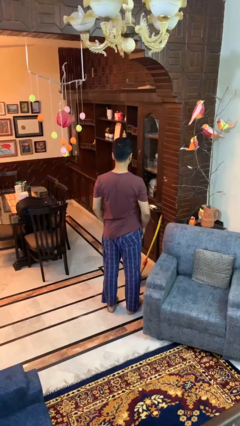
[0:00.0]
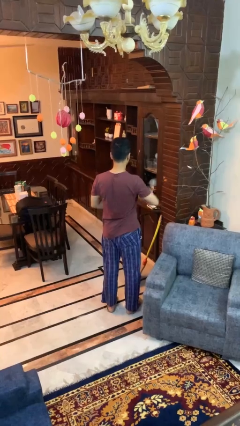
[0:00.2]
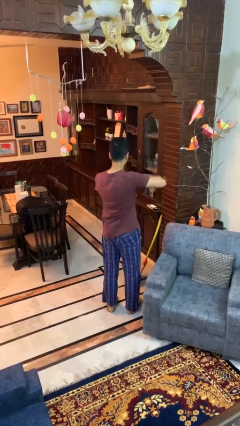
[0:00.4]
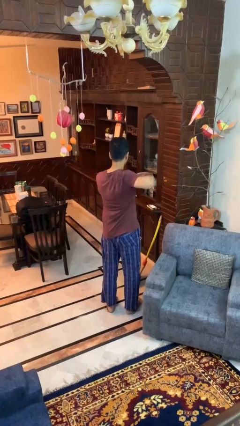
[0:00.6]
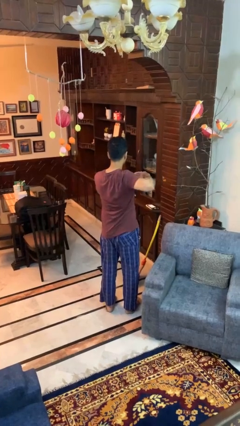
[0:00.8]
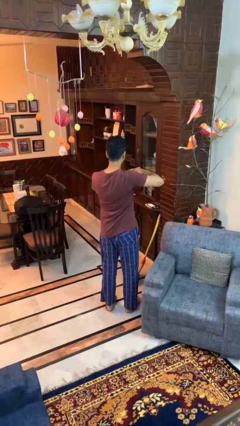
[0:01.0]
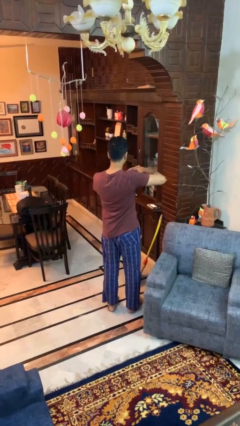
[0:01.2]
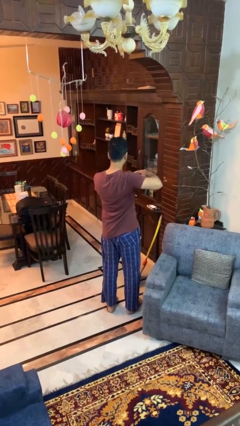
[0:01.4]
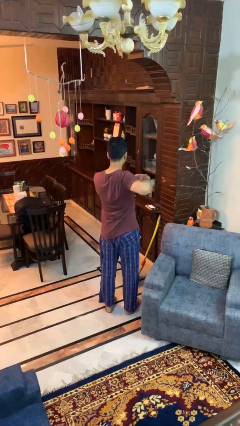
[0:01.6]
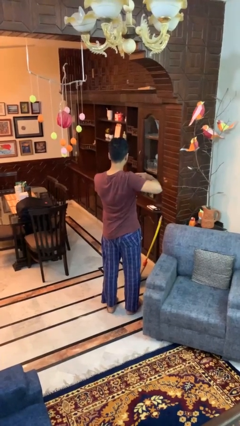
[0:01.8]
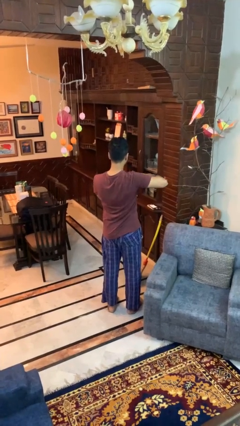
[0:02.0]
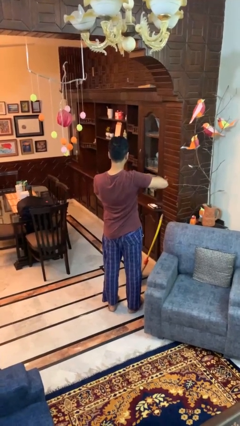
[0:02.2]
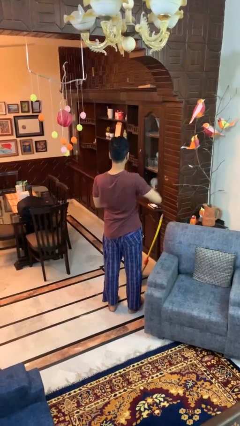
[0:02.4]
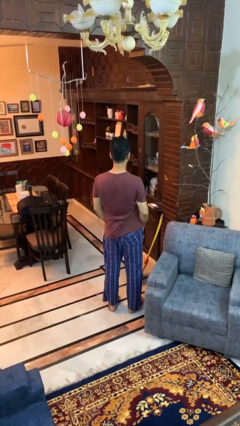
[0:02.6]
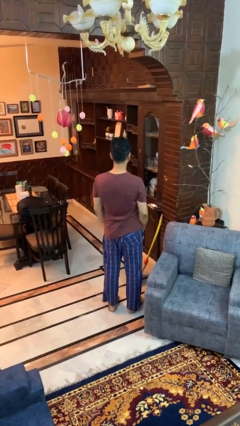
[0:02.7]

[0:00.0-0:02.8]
person stretches arms to side

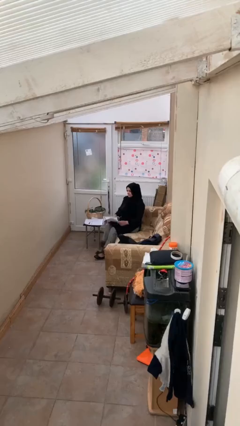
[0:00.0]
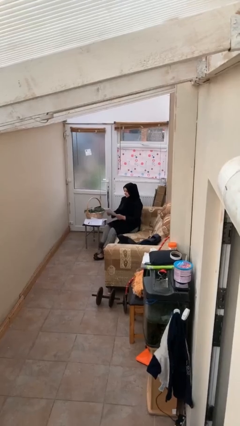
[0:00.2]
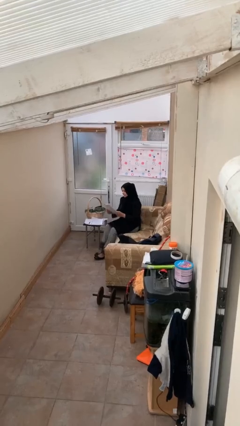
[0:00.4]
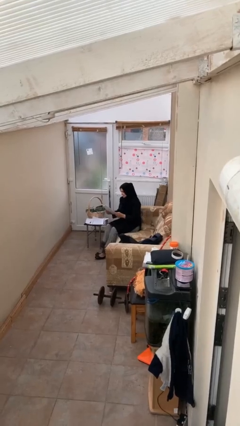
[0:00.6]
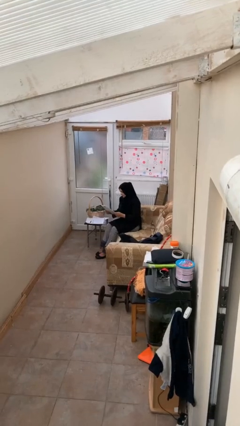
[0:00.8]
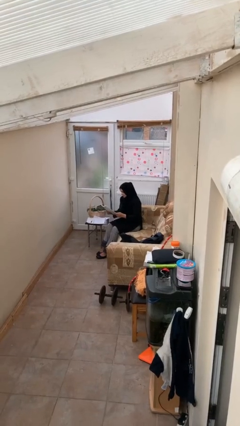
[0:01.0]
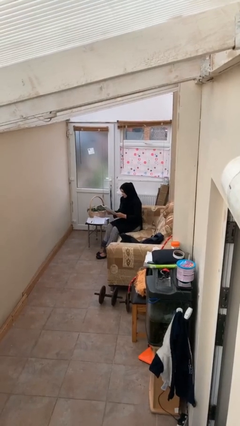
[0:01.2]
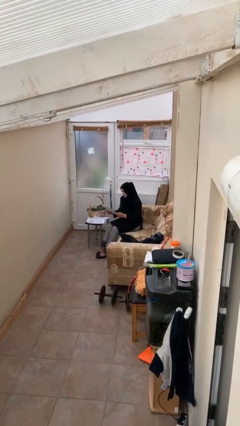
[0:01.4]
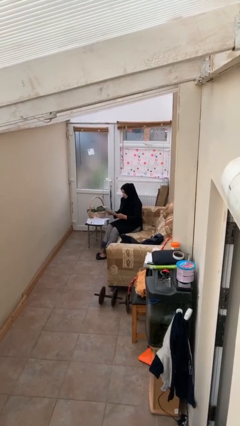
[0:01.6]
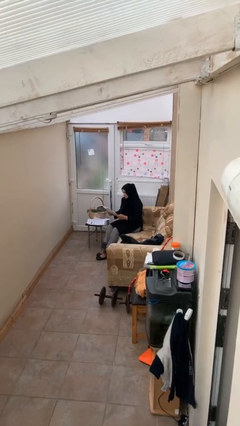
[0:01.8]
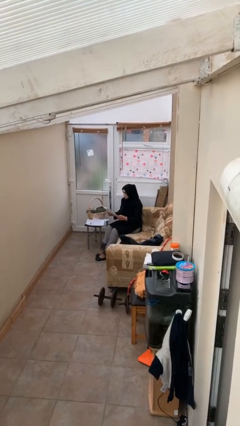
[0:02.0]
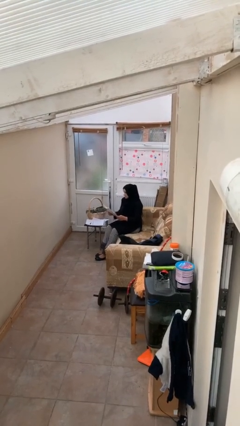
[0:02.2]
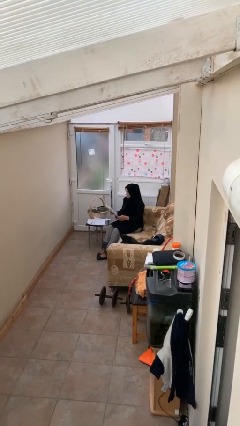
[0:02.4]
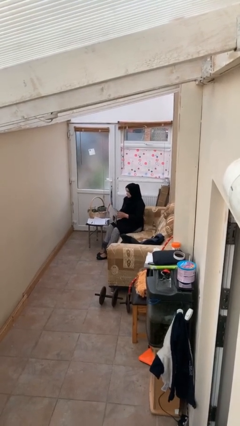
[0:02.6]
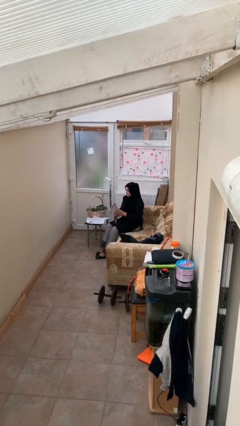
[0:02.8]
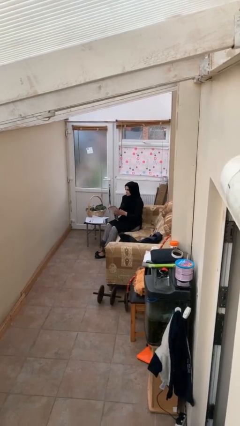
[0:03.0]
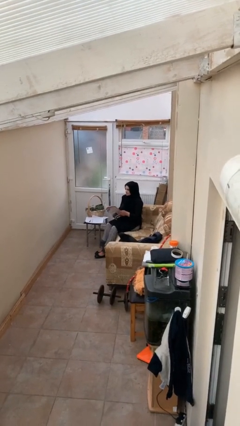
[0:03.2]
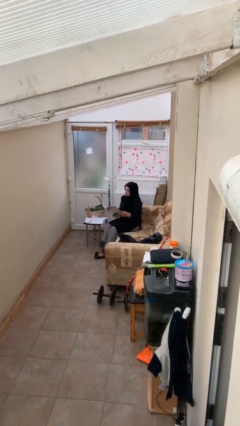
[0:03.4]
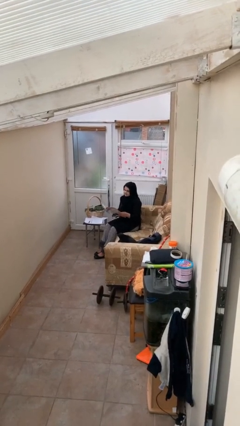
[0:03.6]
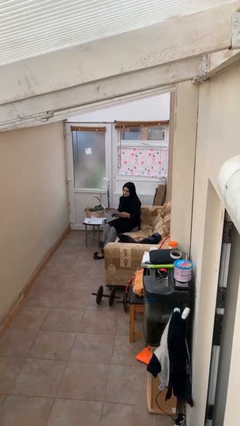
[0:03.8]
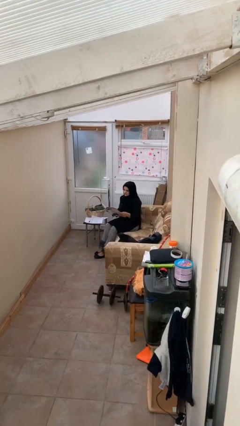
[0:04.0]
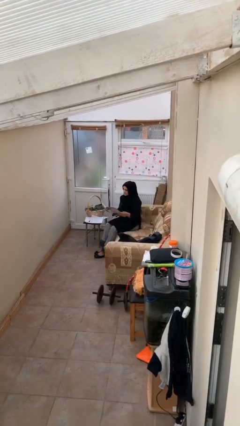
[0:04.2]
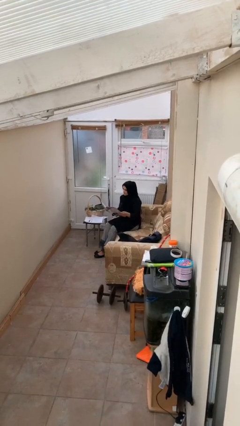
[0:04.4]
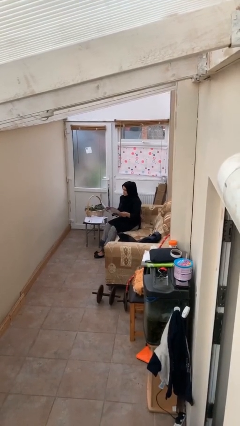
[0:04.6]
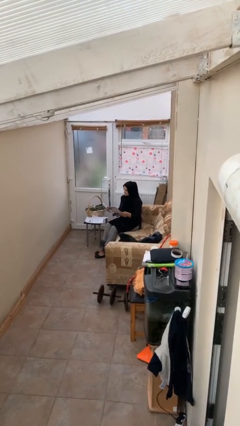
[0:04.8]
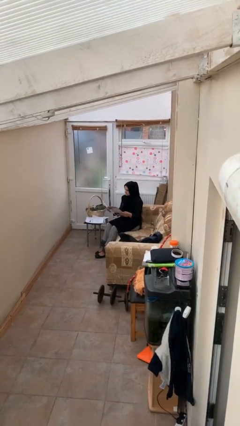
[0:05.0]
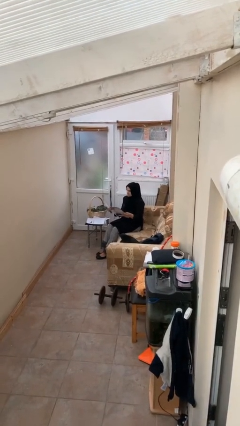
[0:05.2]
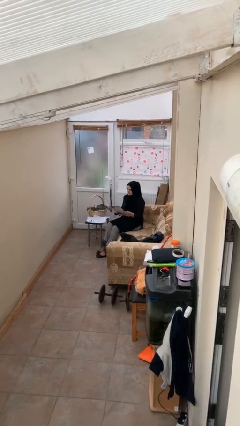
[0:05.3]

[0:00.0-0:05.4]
person reads document

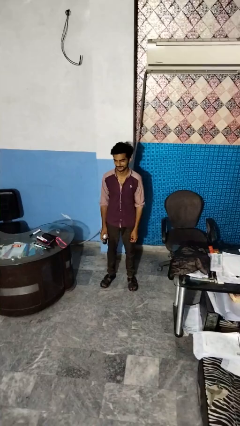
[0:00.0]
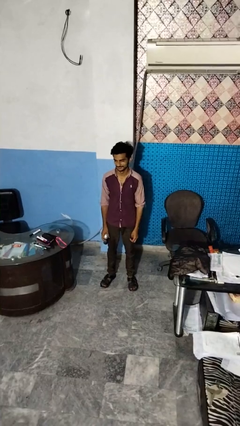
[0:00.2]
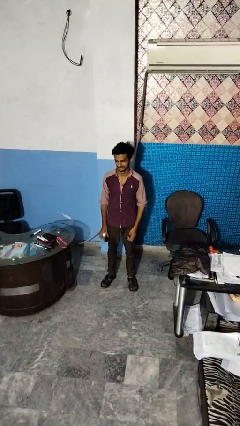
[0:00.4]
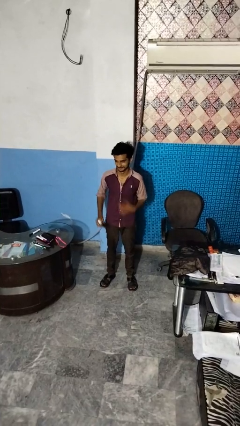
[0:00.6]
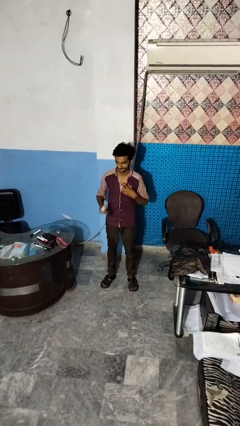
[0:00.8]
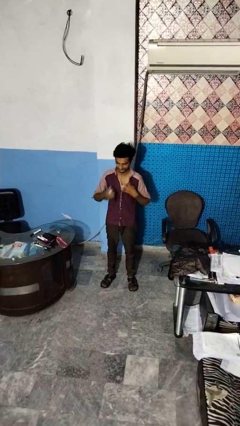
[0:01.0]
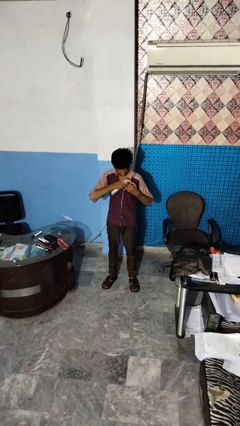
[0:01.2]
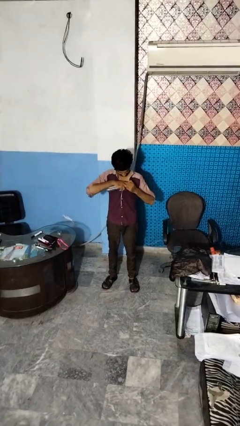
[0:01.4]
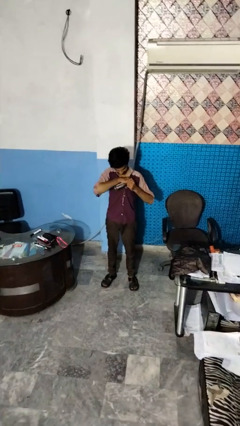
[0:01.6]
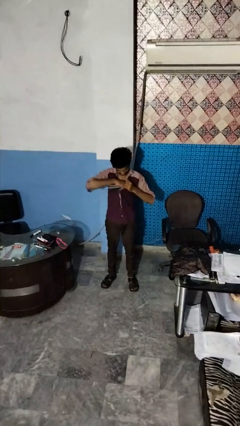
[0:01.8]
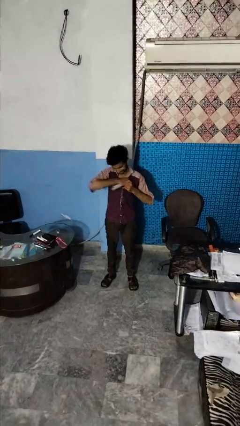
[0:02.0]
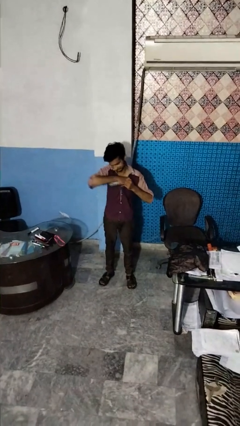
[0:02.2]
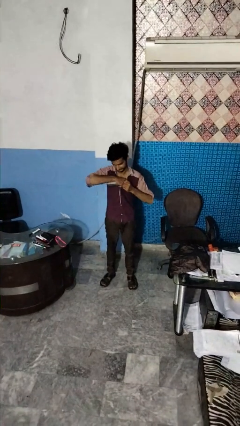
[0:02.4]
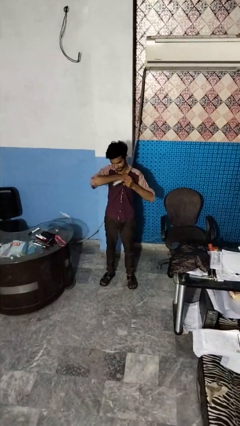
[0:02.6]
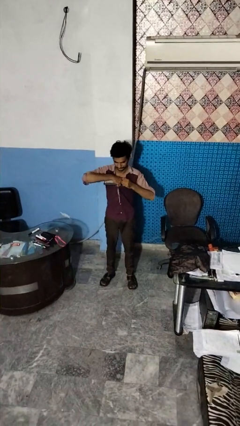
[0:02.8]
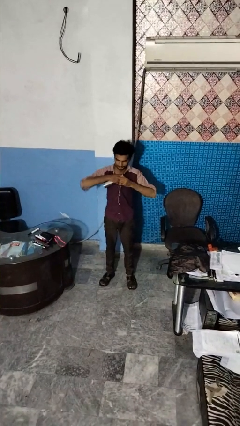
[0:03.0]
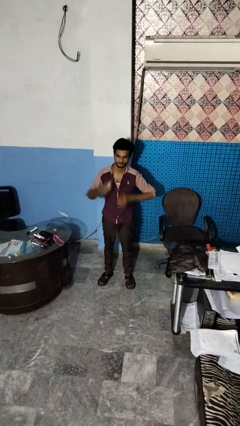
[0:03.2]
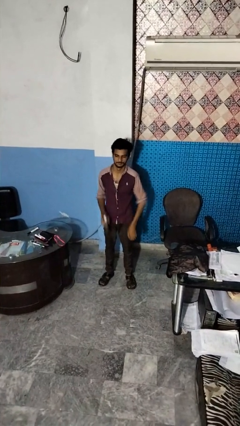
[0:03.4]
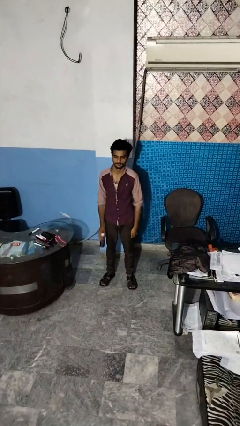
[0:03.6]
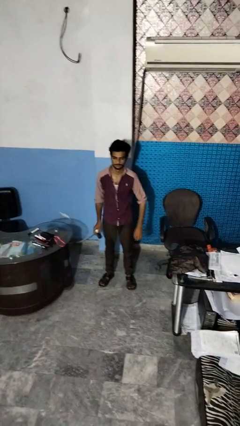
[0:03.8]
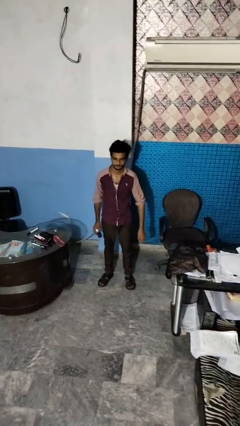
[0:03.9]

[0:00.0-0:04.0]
person applies deodorant

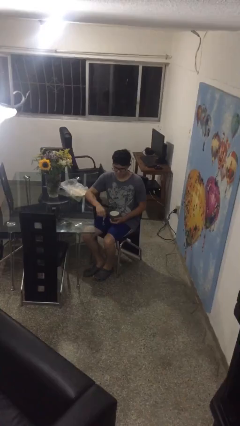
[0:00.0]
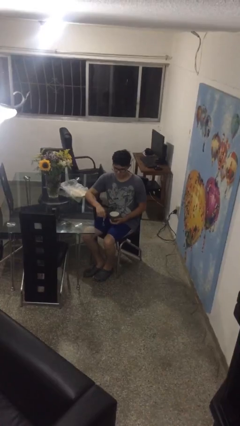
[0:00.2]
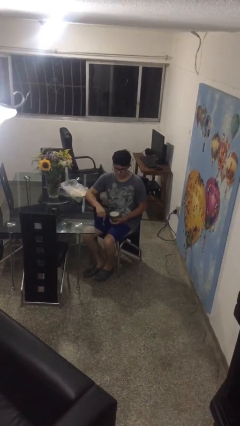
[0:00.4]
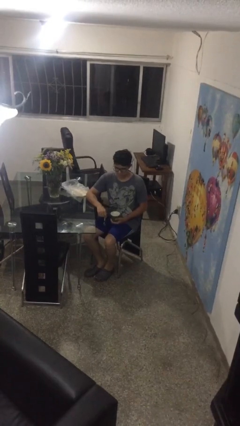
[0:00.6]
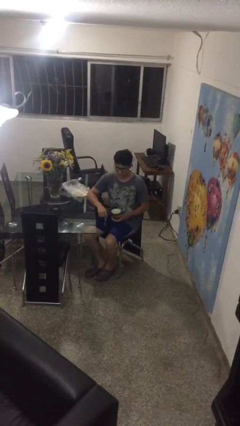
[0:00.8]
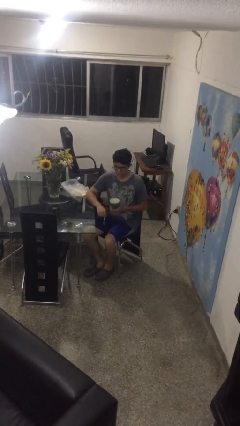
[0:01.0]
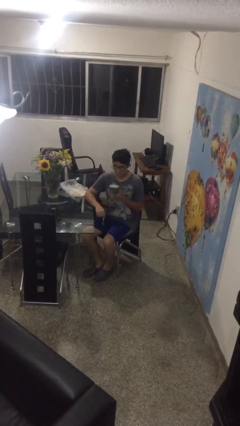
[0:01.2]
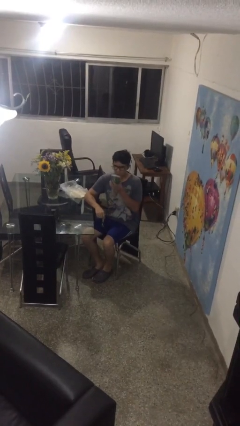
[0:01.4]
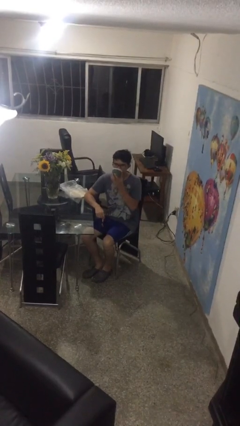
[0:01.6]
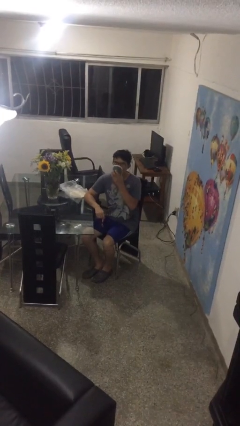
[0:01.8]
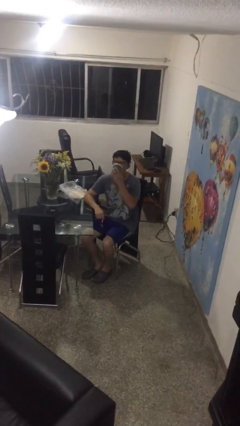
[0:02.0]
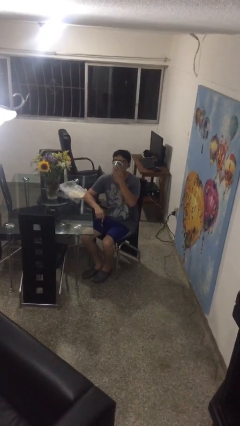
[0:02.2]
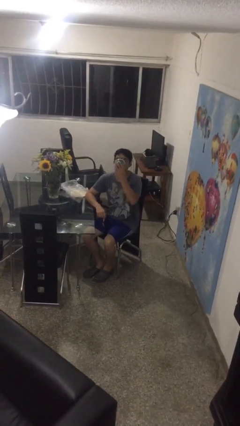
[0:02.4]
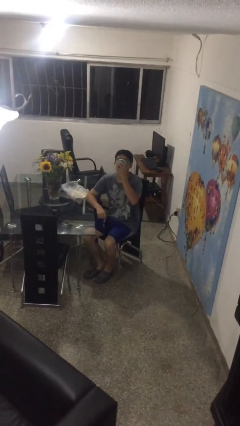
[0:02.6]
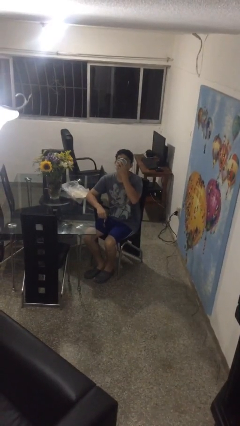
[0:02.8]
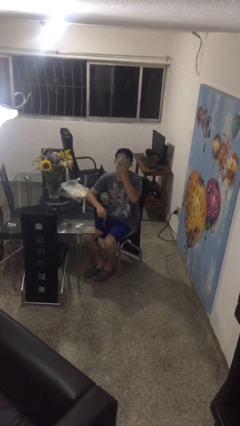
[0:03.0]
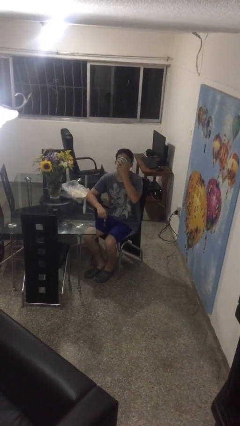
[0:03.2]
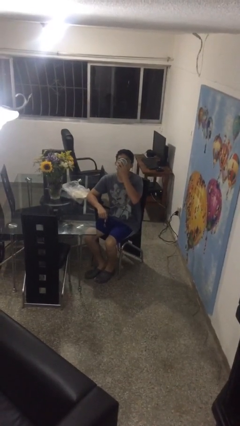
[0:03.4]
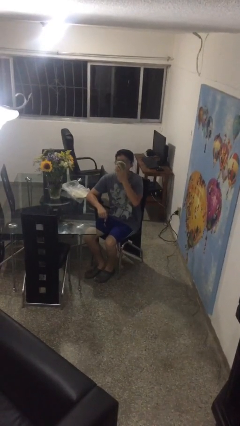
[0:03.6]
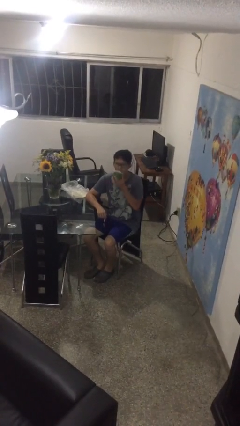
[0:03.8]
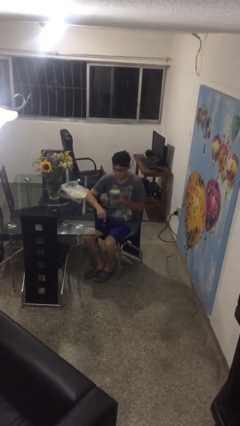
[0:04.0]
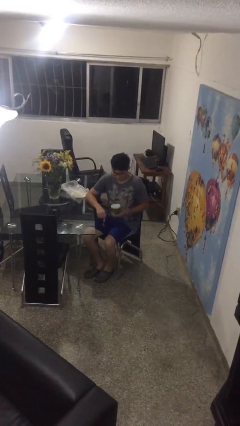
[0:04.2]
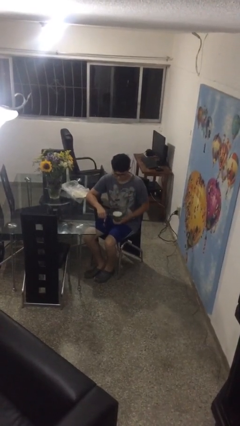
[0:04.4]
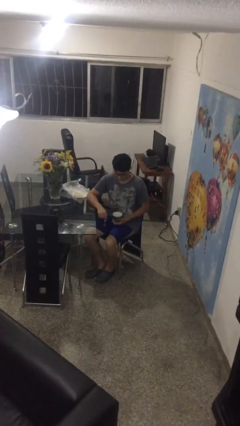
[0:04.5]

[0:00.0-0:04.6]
person drinks from mug

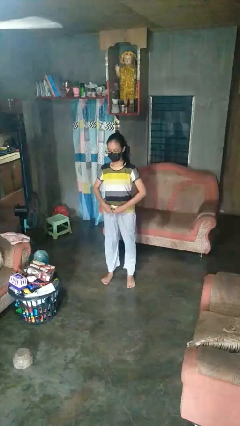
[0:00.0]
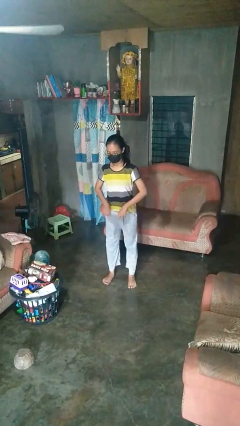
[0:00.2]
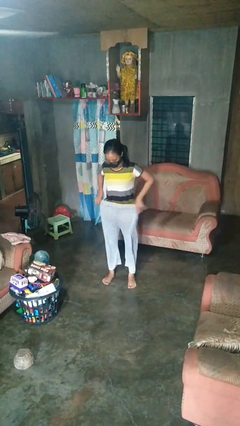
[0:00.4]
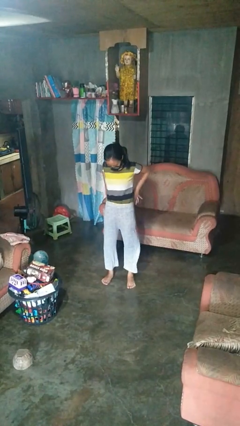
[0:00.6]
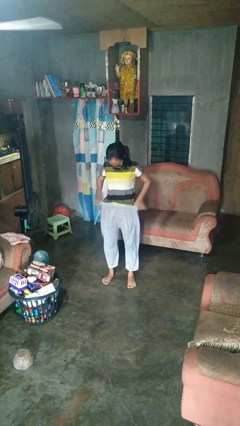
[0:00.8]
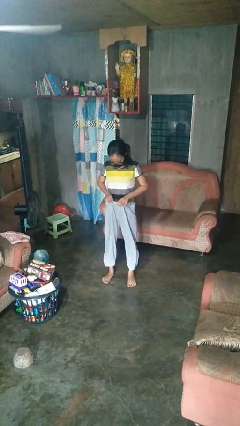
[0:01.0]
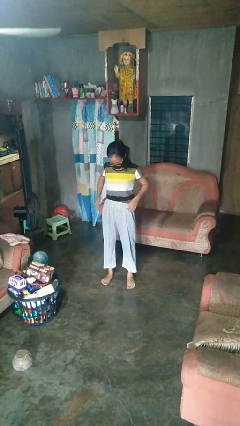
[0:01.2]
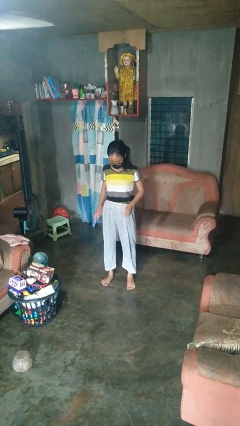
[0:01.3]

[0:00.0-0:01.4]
person tucks in shirt
